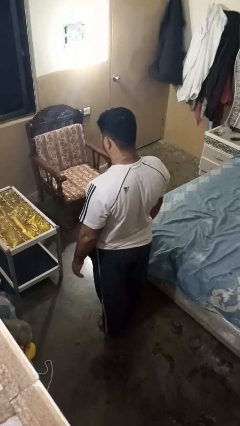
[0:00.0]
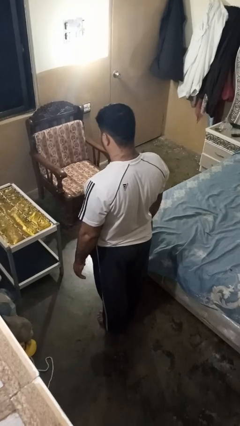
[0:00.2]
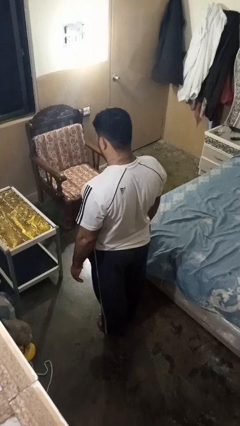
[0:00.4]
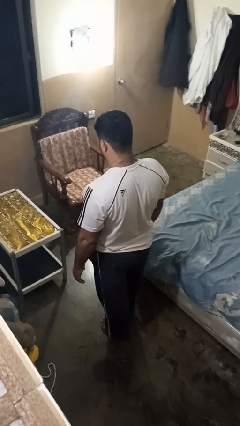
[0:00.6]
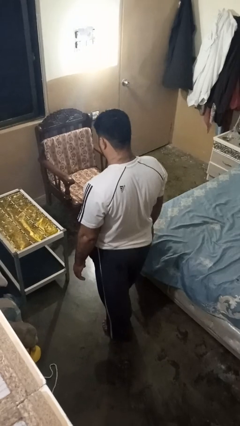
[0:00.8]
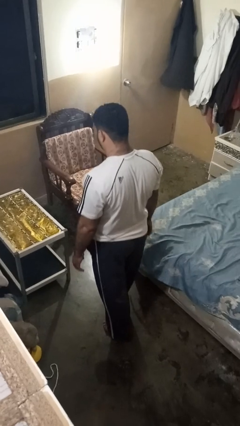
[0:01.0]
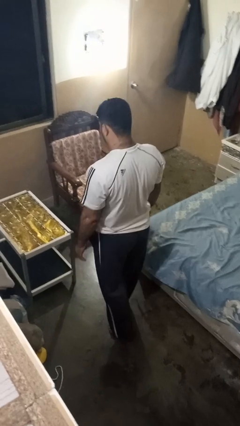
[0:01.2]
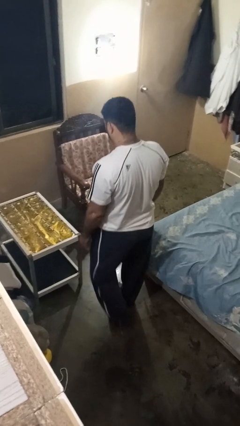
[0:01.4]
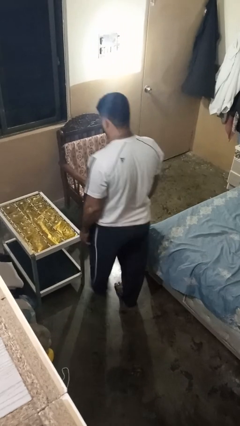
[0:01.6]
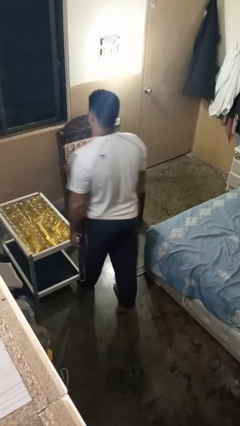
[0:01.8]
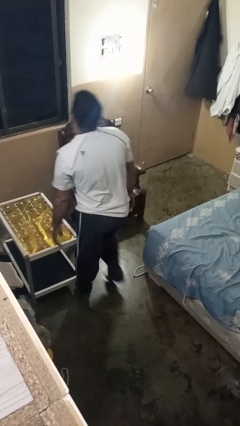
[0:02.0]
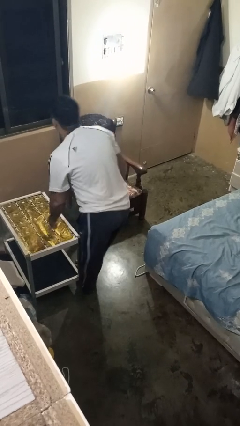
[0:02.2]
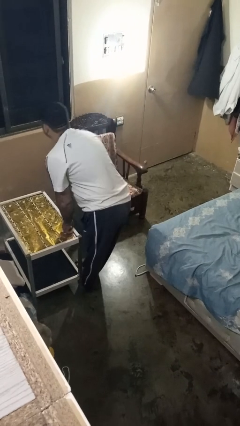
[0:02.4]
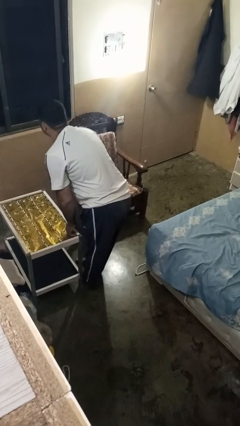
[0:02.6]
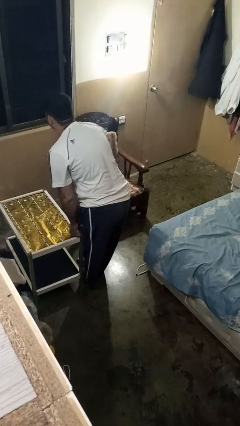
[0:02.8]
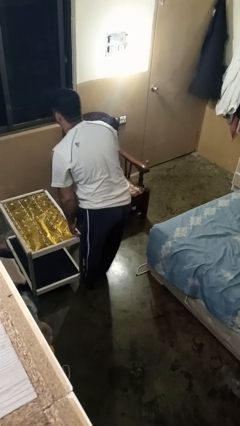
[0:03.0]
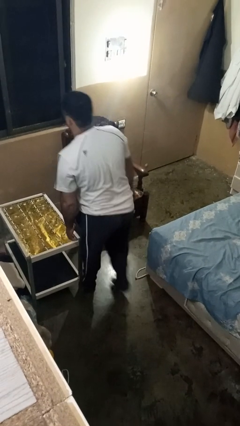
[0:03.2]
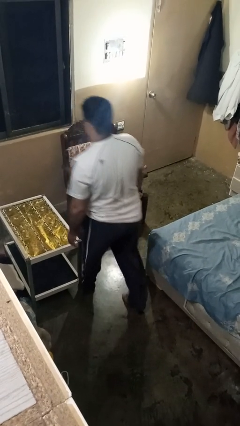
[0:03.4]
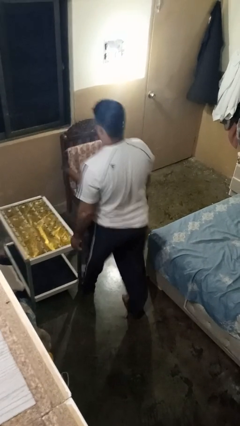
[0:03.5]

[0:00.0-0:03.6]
person bumps into table

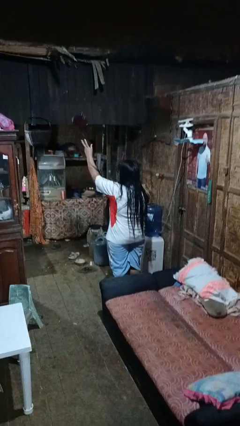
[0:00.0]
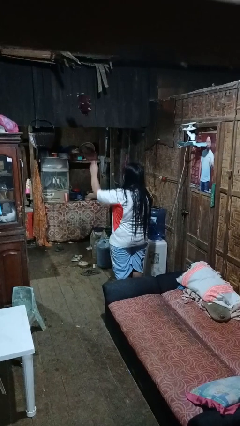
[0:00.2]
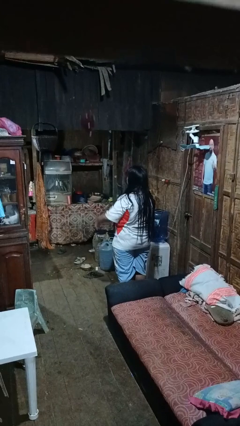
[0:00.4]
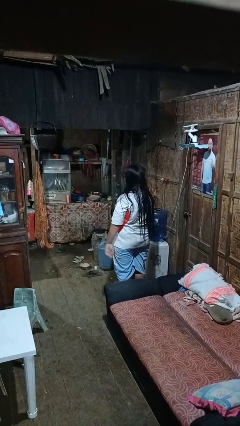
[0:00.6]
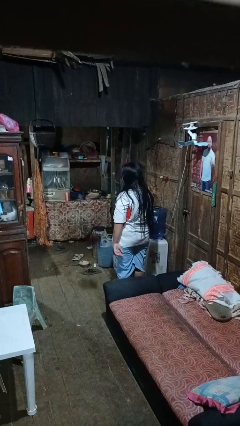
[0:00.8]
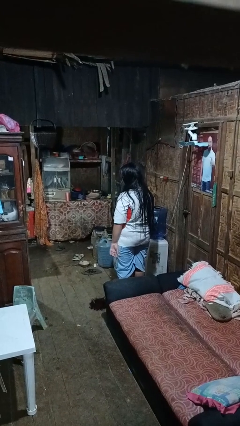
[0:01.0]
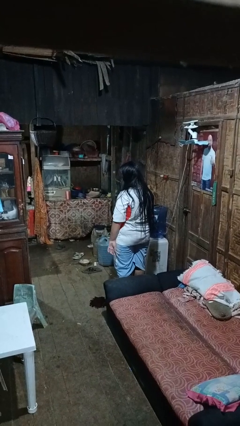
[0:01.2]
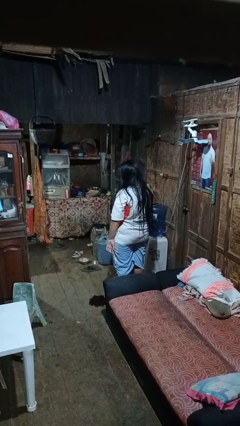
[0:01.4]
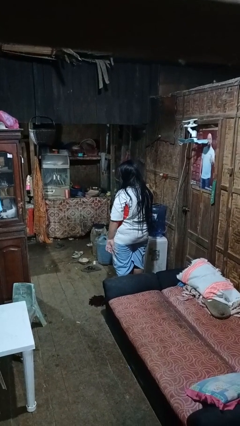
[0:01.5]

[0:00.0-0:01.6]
person throws object into air

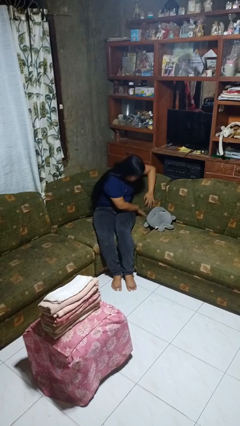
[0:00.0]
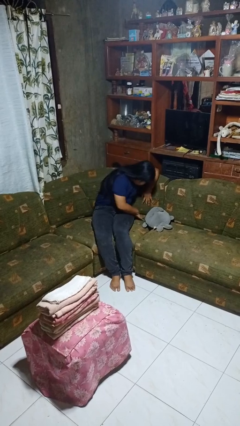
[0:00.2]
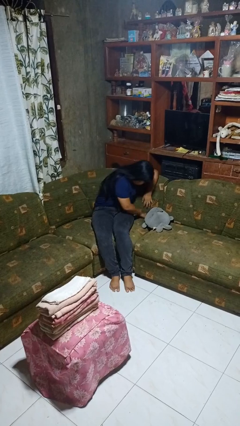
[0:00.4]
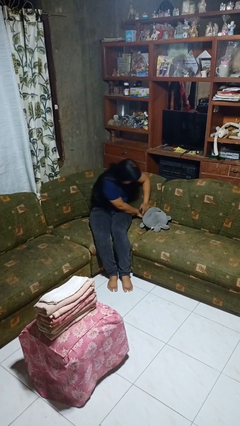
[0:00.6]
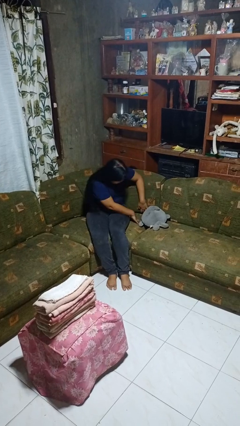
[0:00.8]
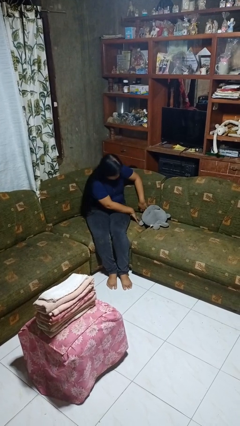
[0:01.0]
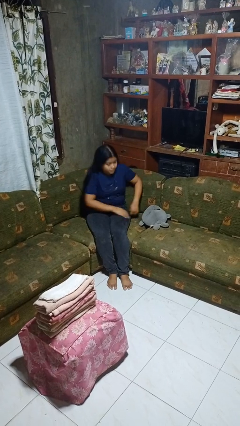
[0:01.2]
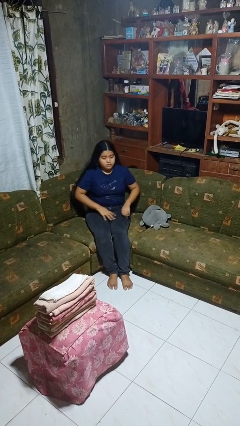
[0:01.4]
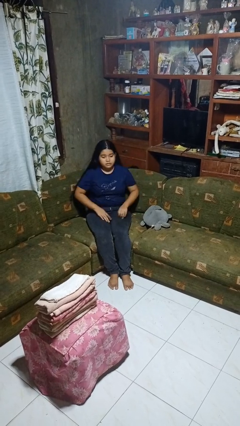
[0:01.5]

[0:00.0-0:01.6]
person searches in couch

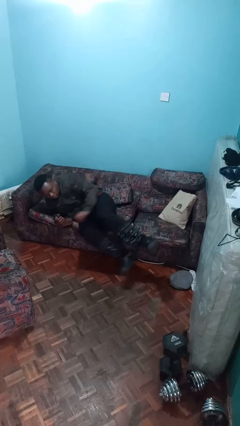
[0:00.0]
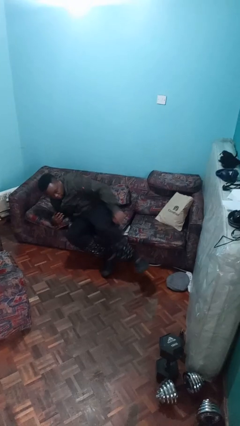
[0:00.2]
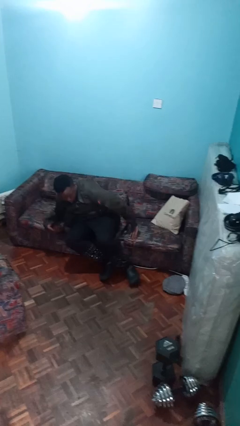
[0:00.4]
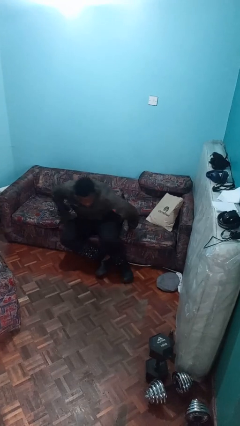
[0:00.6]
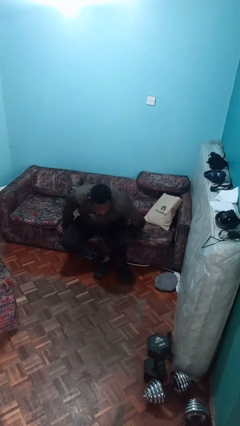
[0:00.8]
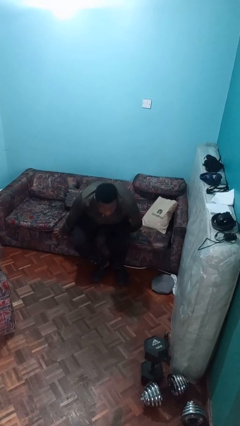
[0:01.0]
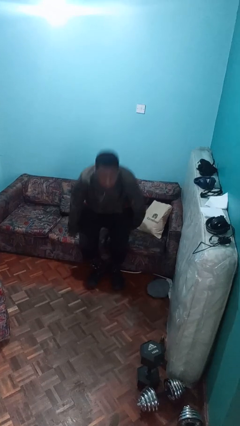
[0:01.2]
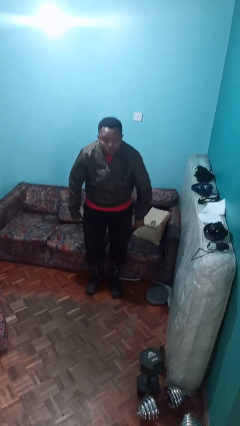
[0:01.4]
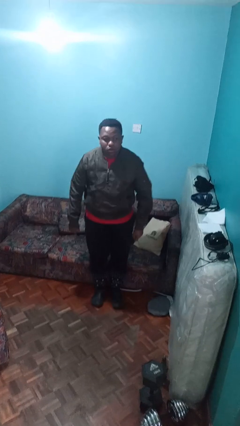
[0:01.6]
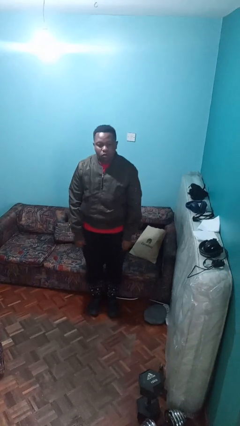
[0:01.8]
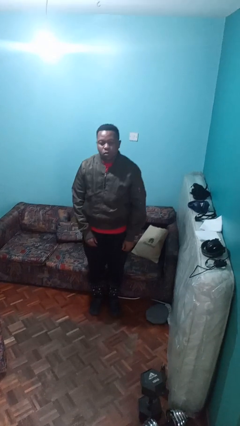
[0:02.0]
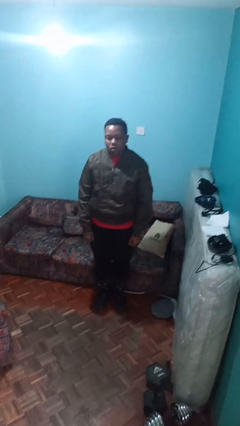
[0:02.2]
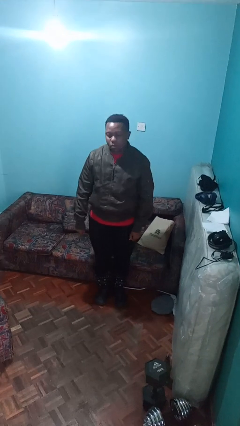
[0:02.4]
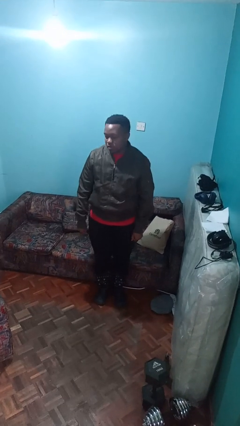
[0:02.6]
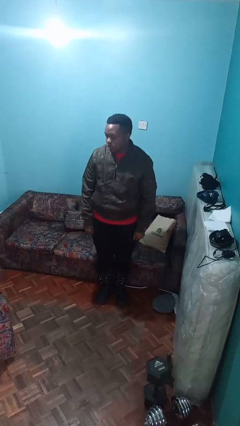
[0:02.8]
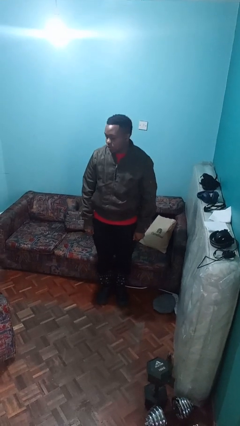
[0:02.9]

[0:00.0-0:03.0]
person stands up

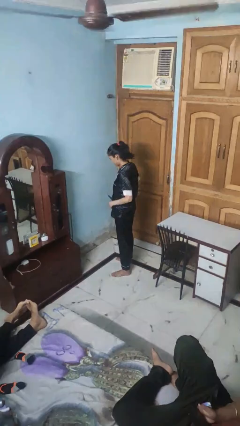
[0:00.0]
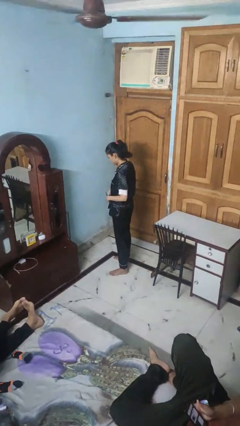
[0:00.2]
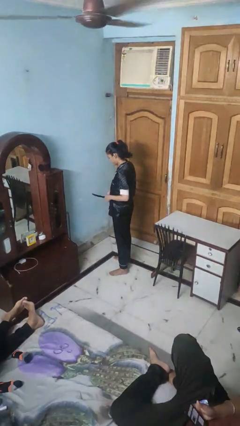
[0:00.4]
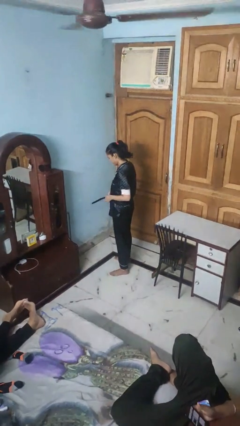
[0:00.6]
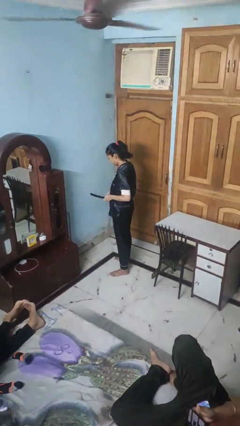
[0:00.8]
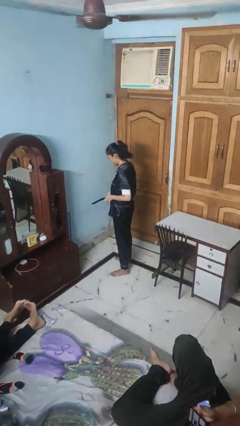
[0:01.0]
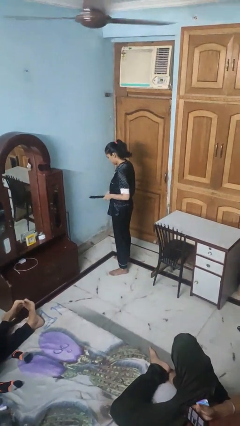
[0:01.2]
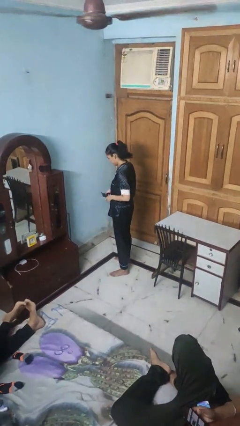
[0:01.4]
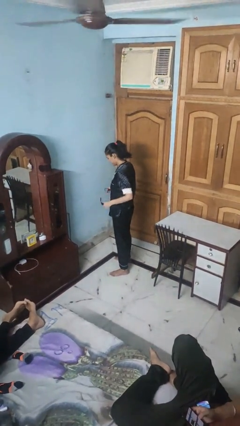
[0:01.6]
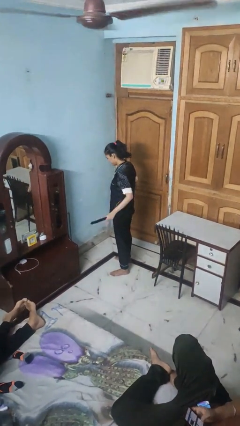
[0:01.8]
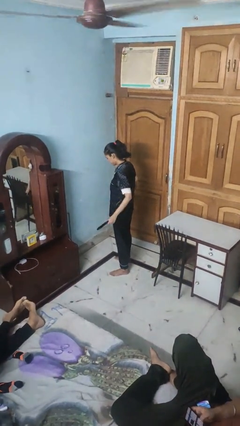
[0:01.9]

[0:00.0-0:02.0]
person takes off belt

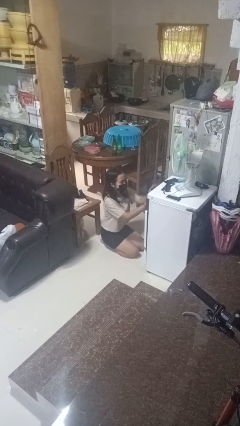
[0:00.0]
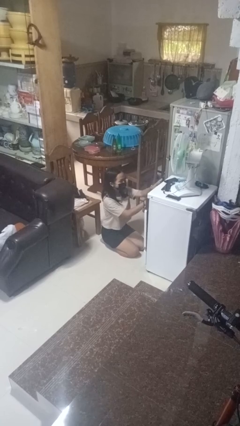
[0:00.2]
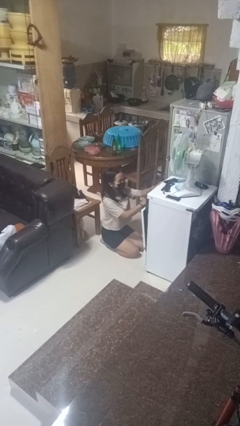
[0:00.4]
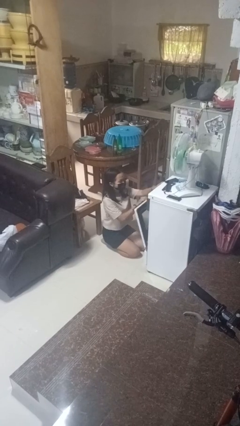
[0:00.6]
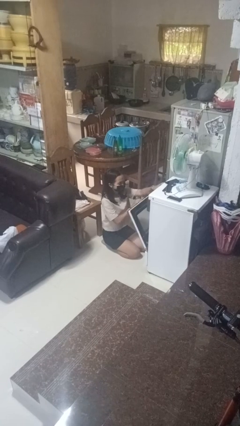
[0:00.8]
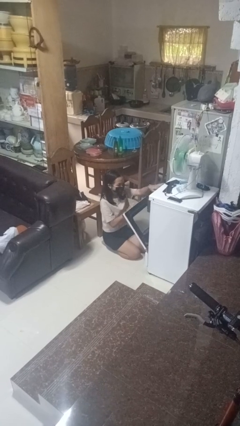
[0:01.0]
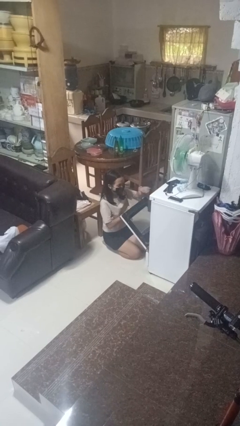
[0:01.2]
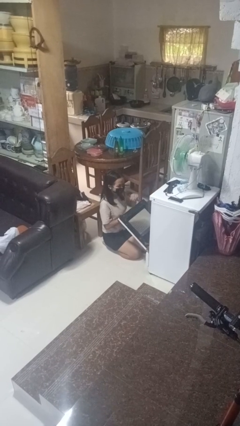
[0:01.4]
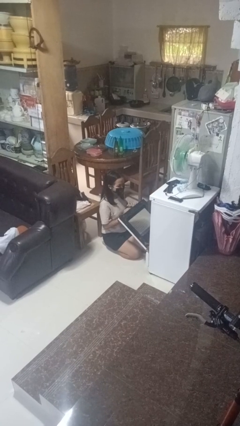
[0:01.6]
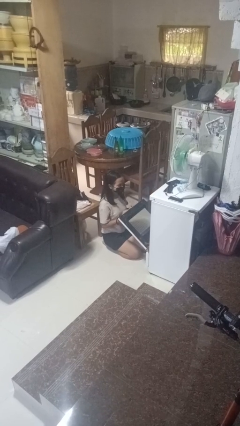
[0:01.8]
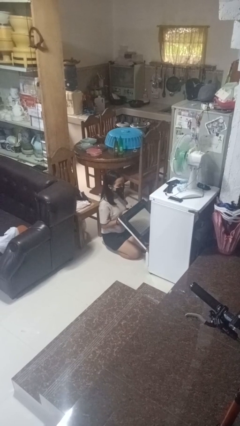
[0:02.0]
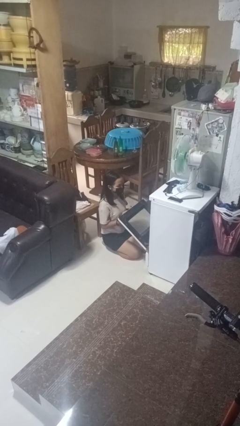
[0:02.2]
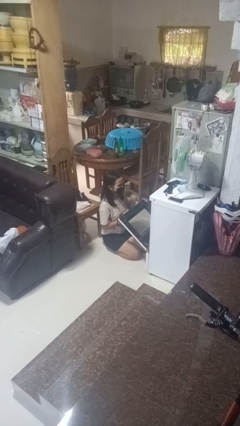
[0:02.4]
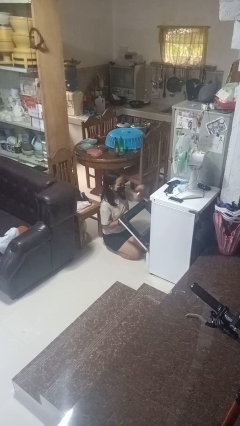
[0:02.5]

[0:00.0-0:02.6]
person opens oven door

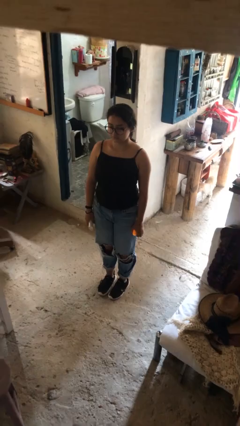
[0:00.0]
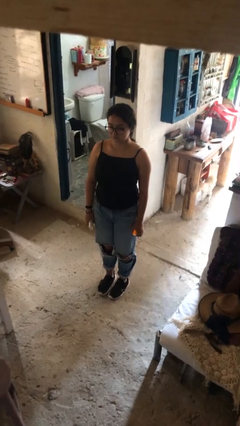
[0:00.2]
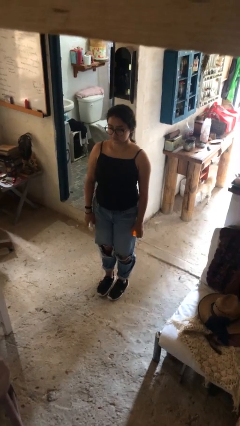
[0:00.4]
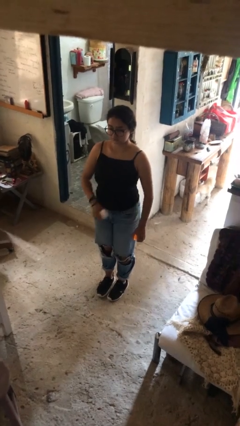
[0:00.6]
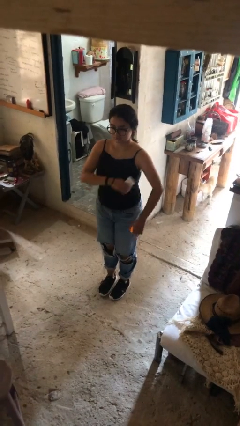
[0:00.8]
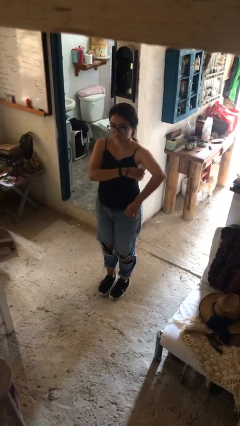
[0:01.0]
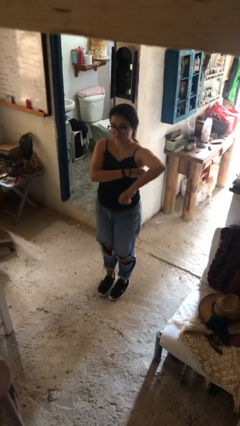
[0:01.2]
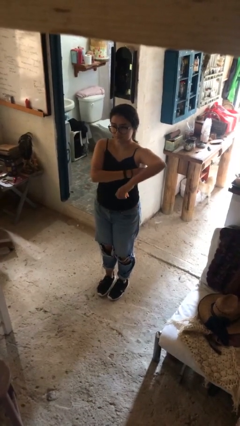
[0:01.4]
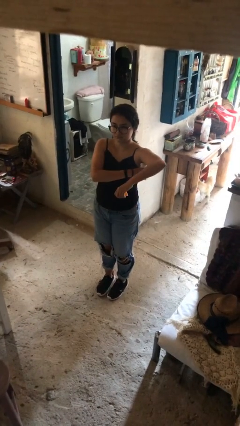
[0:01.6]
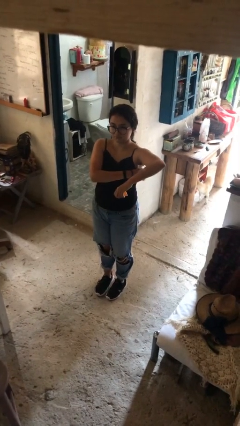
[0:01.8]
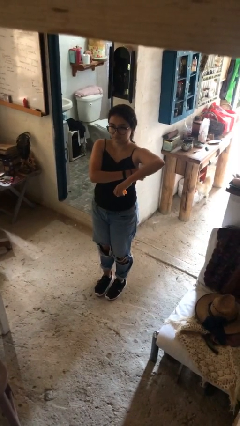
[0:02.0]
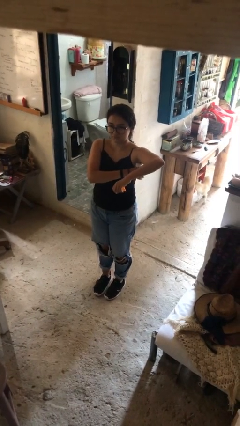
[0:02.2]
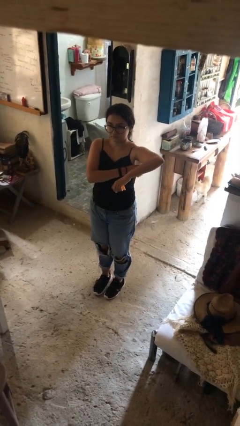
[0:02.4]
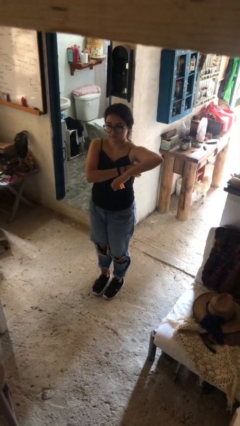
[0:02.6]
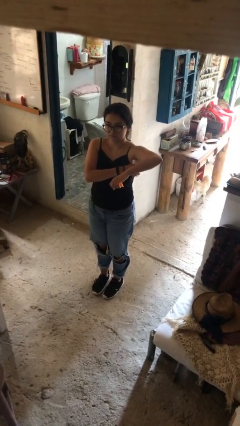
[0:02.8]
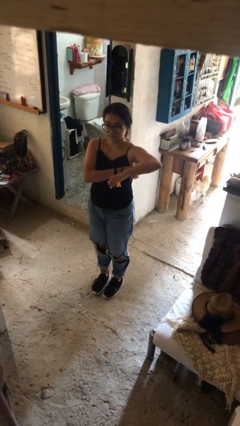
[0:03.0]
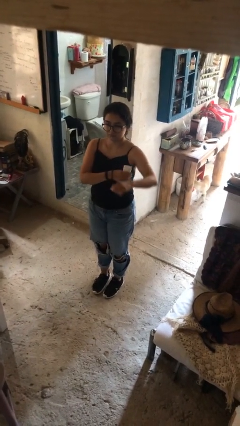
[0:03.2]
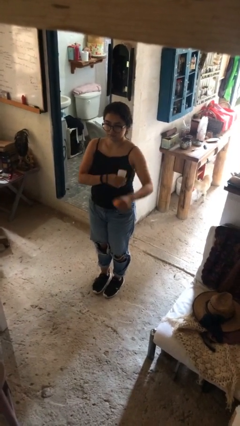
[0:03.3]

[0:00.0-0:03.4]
person applies deodorant
